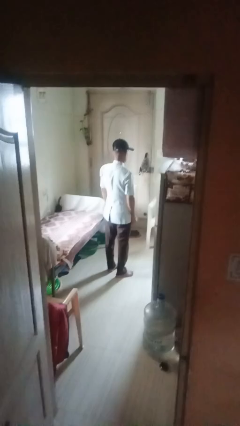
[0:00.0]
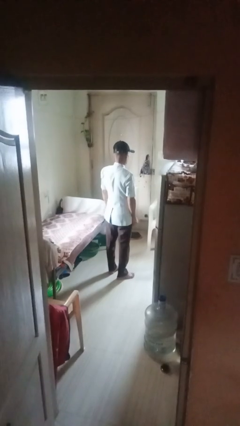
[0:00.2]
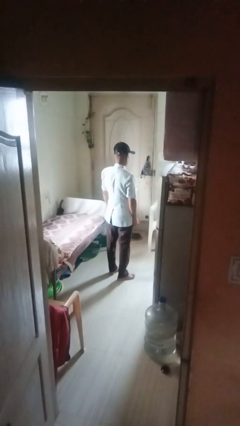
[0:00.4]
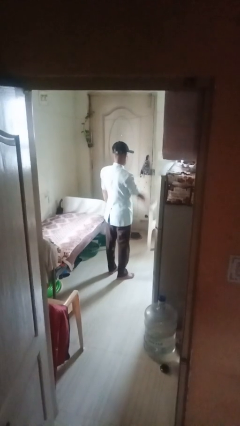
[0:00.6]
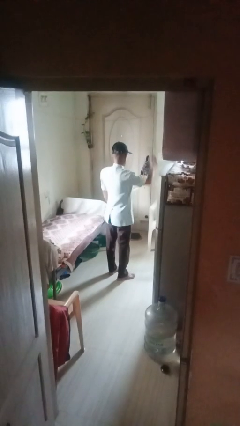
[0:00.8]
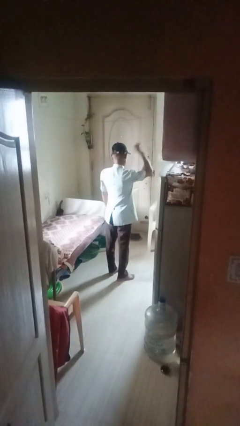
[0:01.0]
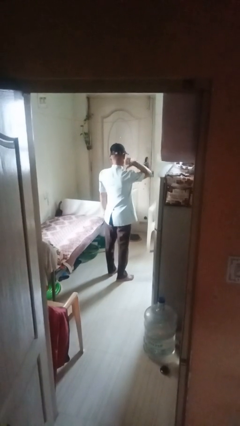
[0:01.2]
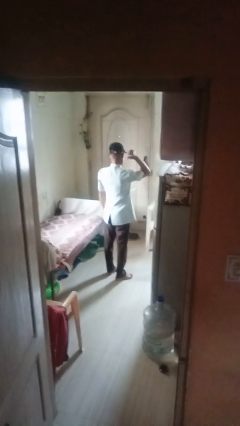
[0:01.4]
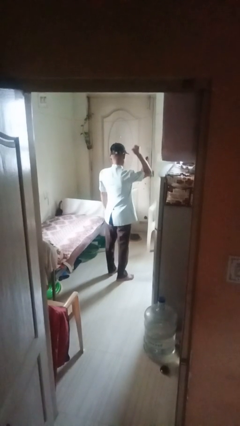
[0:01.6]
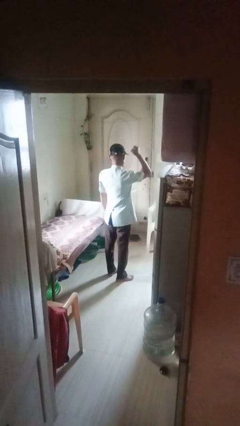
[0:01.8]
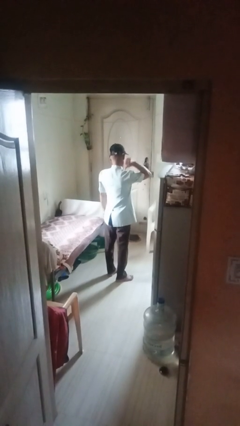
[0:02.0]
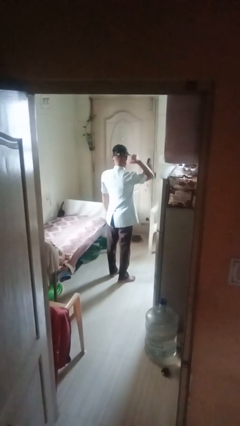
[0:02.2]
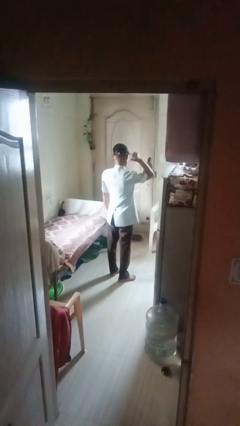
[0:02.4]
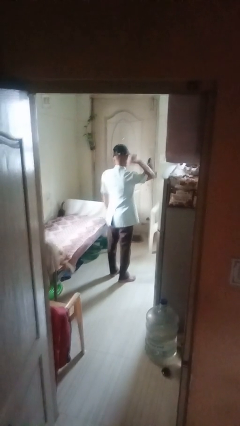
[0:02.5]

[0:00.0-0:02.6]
person gestures behind me

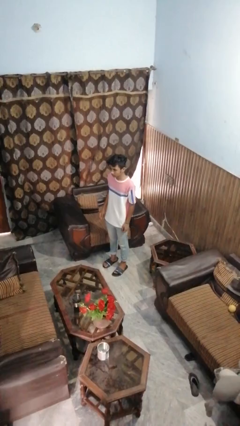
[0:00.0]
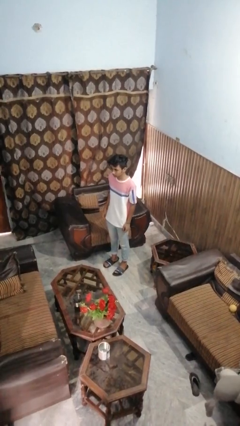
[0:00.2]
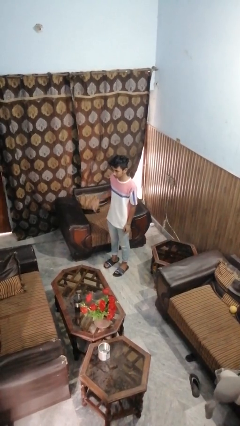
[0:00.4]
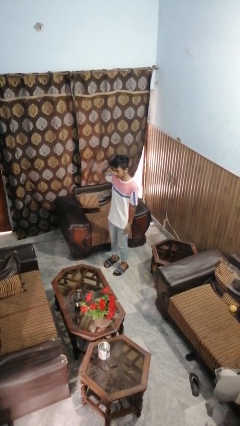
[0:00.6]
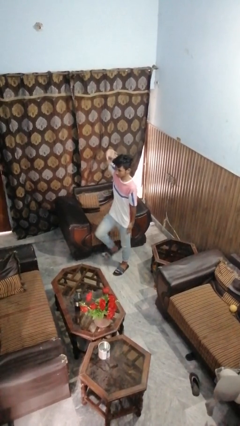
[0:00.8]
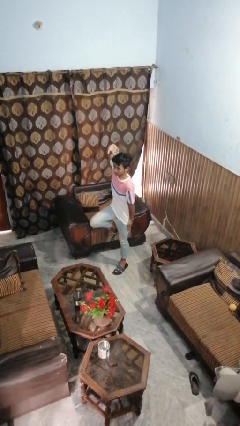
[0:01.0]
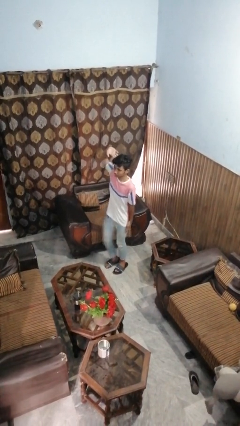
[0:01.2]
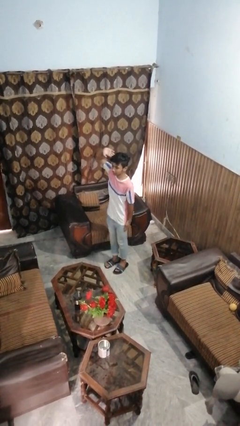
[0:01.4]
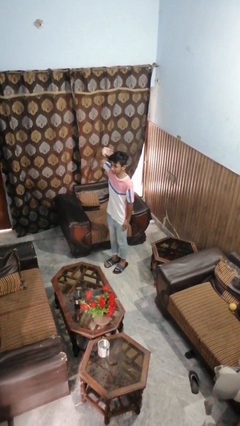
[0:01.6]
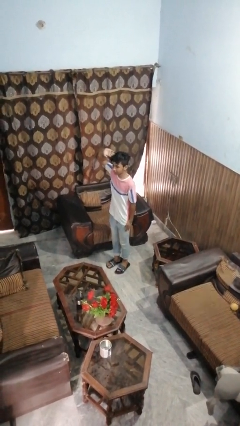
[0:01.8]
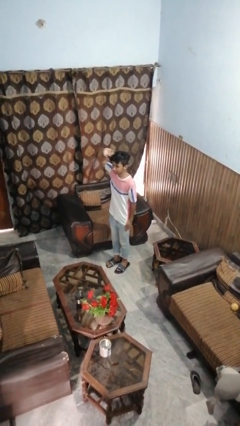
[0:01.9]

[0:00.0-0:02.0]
person salutes

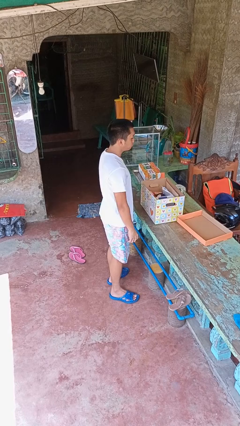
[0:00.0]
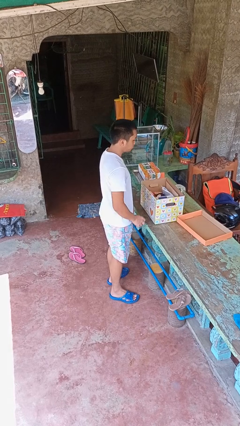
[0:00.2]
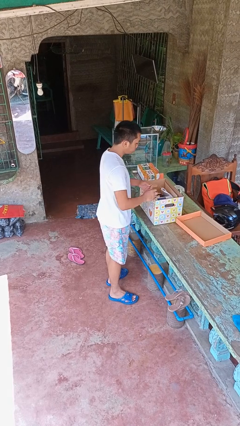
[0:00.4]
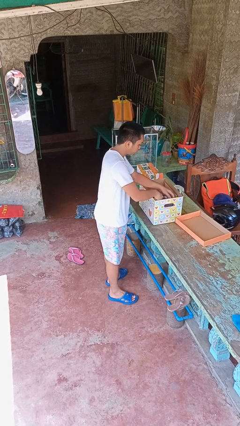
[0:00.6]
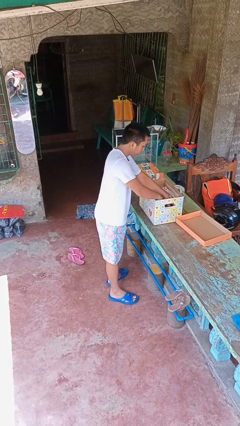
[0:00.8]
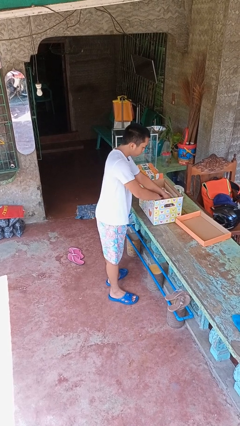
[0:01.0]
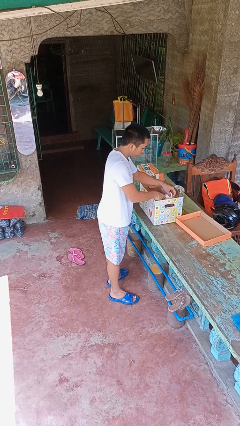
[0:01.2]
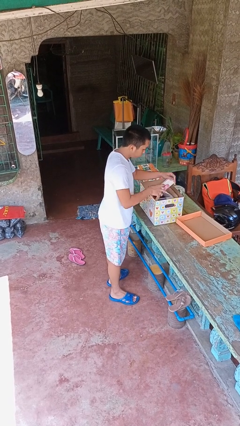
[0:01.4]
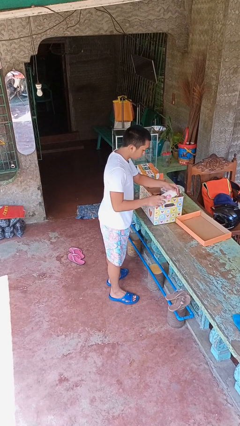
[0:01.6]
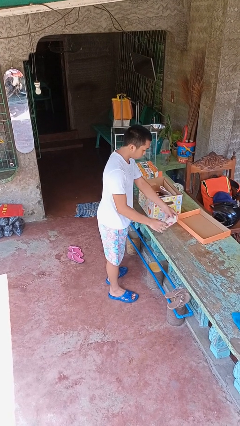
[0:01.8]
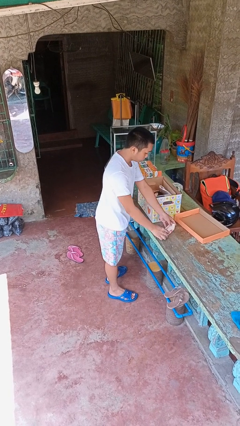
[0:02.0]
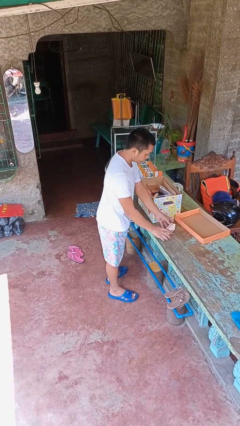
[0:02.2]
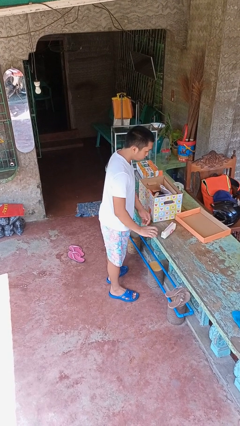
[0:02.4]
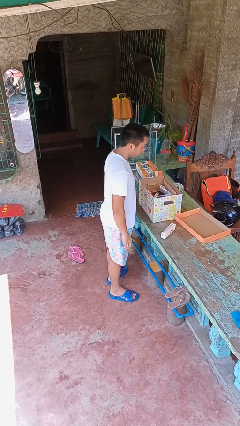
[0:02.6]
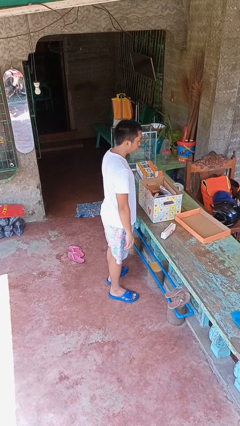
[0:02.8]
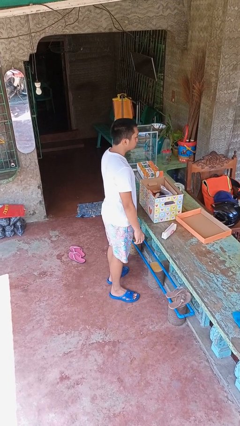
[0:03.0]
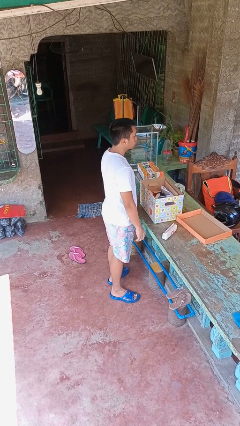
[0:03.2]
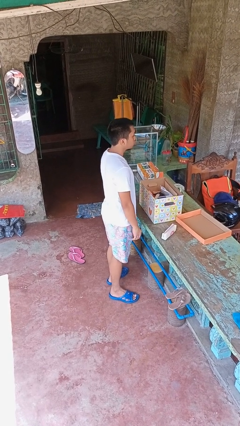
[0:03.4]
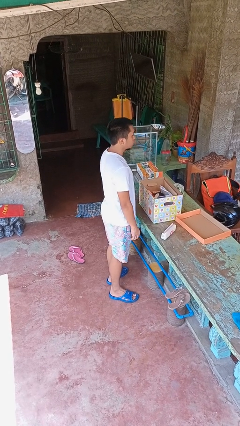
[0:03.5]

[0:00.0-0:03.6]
person takes object from box

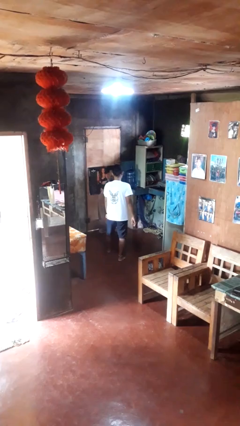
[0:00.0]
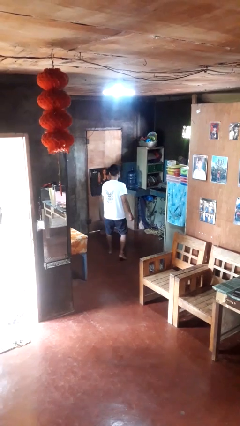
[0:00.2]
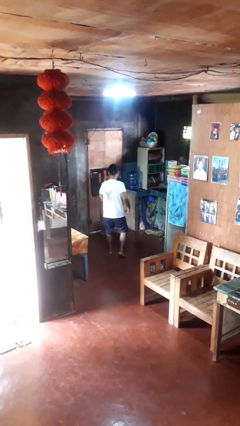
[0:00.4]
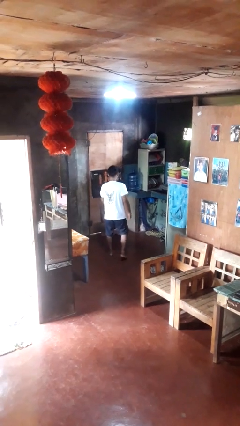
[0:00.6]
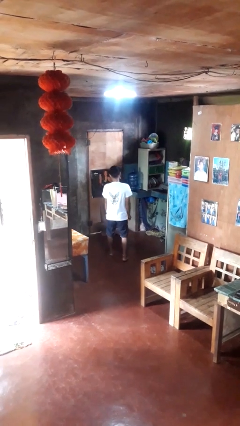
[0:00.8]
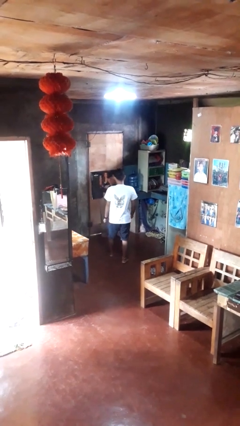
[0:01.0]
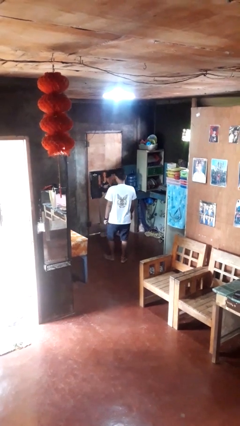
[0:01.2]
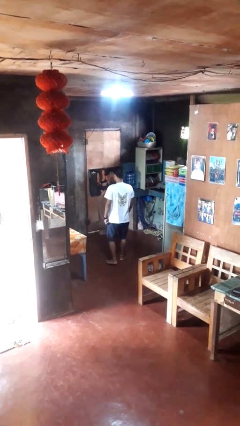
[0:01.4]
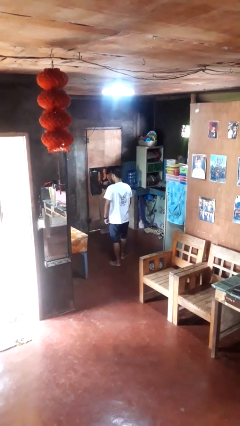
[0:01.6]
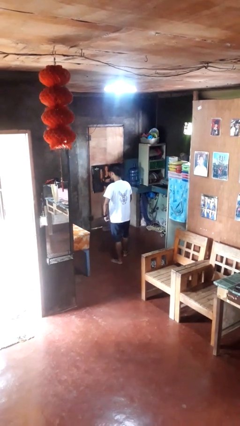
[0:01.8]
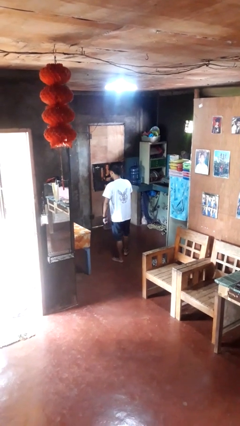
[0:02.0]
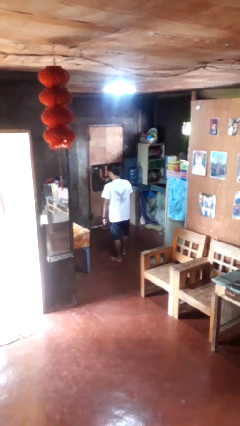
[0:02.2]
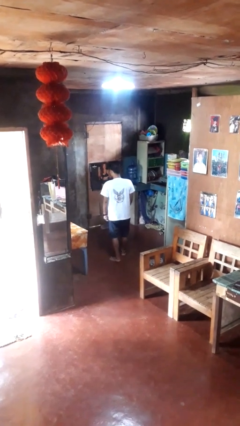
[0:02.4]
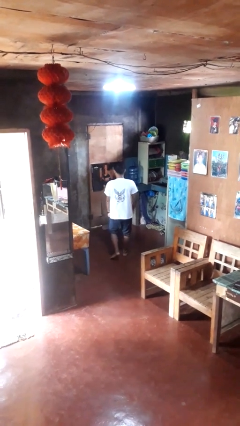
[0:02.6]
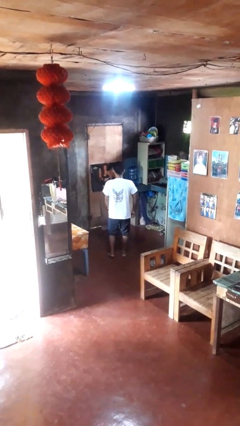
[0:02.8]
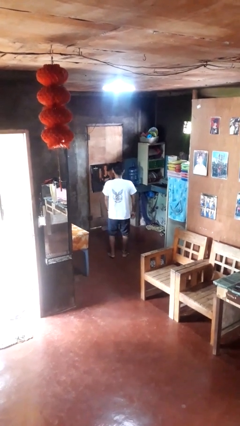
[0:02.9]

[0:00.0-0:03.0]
person dances in place

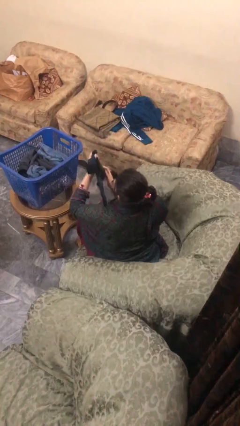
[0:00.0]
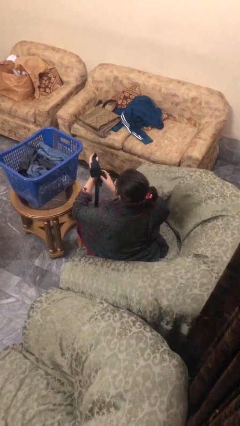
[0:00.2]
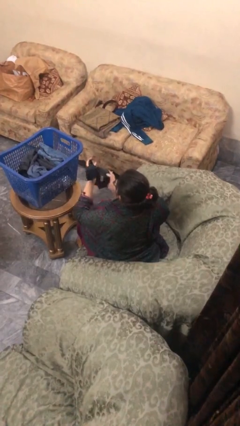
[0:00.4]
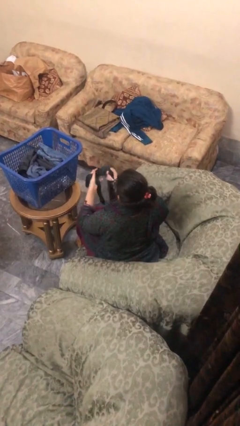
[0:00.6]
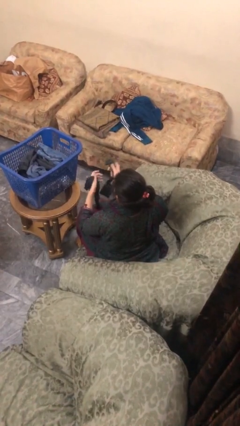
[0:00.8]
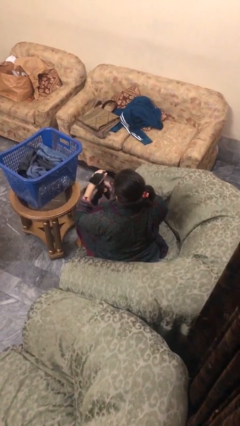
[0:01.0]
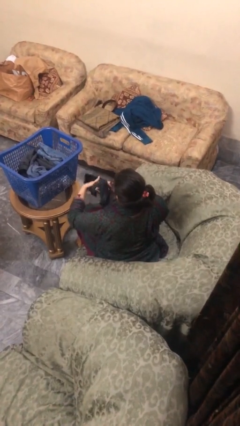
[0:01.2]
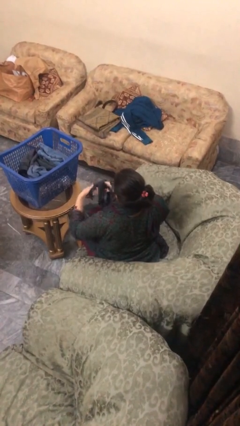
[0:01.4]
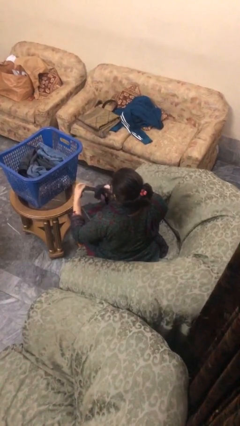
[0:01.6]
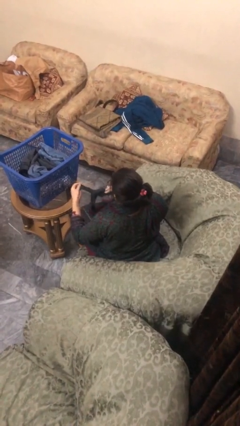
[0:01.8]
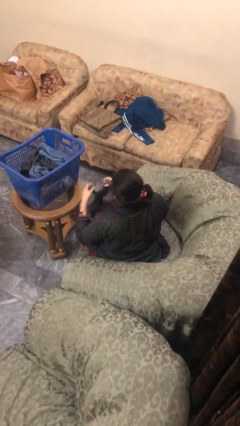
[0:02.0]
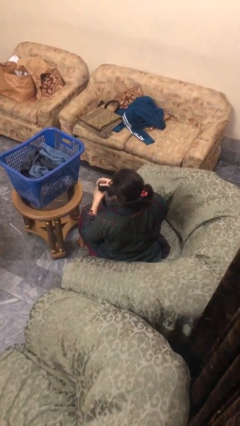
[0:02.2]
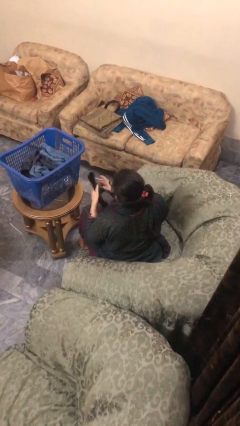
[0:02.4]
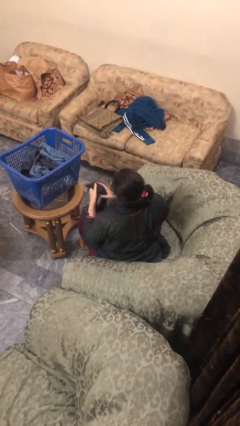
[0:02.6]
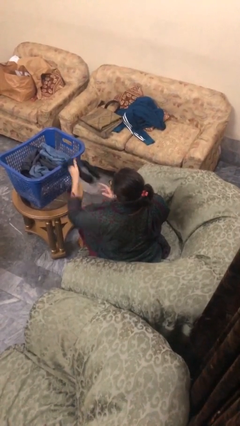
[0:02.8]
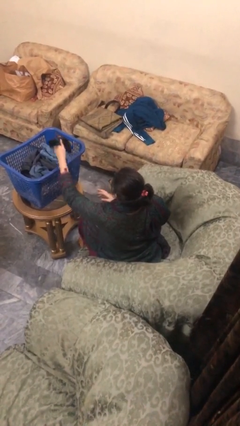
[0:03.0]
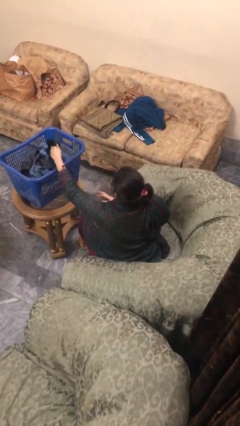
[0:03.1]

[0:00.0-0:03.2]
person folds socks

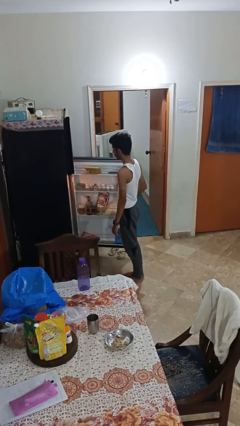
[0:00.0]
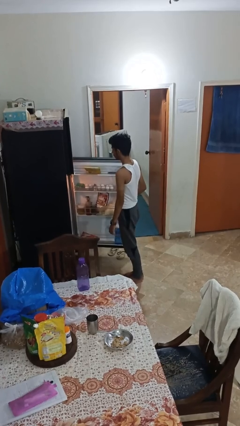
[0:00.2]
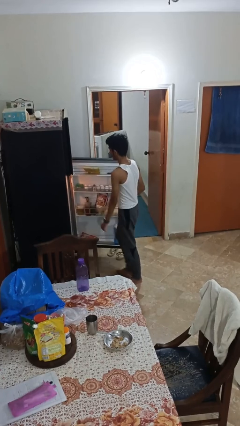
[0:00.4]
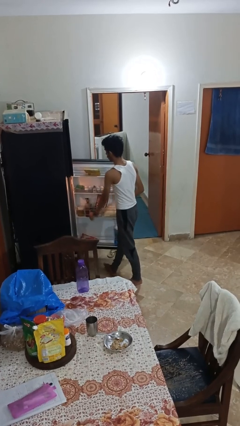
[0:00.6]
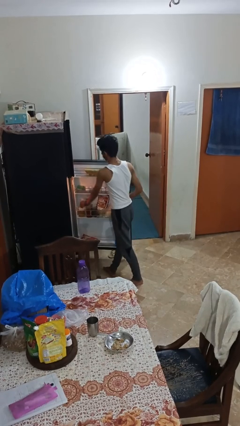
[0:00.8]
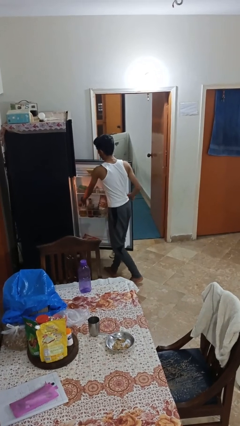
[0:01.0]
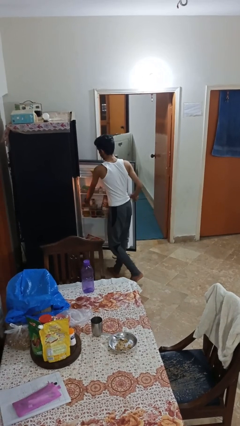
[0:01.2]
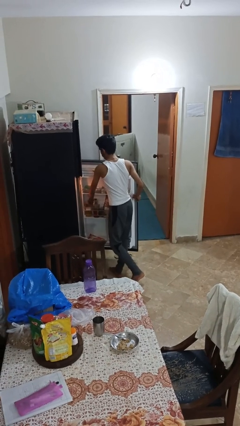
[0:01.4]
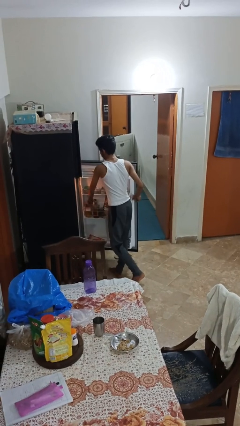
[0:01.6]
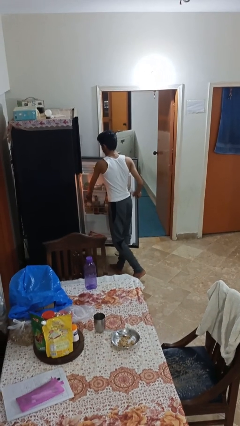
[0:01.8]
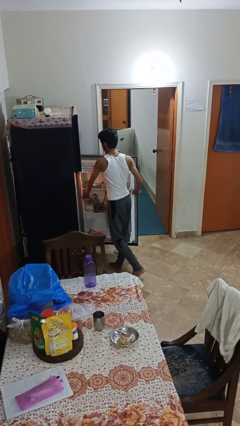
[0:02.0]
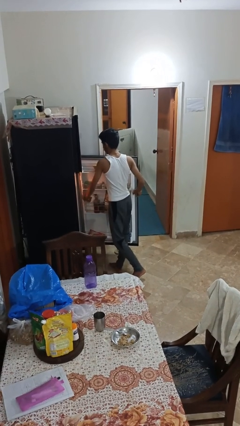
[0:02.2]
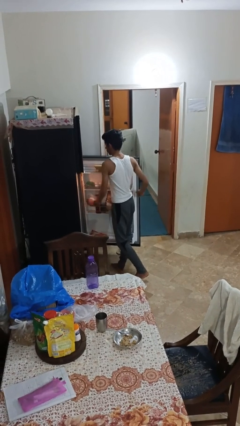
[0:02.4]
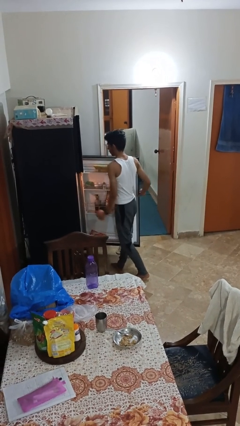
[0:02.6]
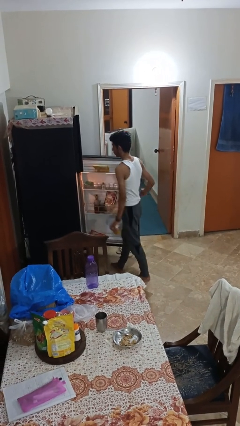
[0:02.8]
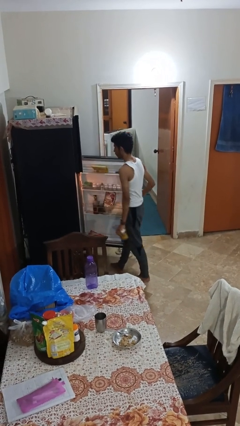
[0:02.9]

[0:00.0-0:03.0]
person takes object from refrigerator

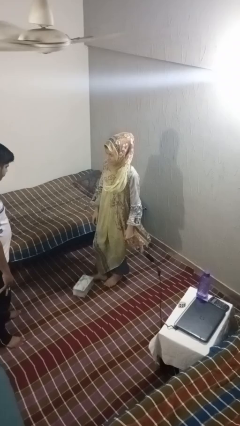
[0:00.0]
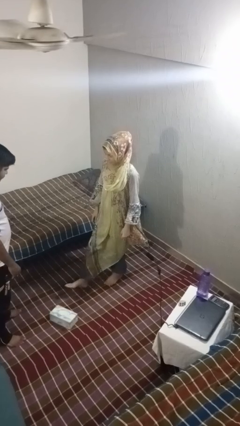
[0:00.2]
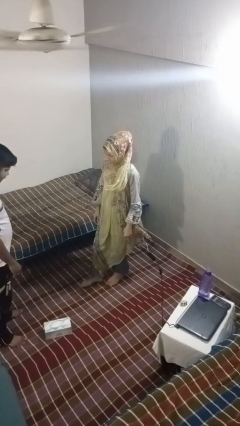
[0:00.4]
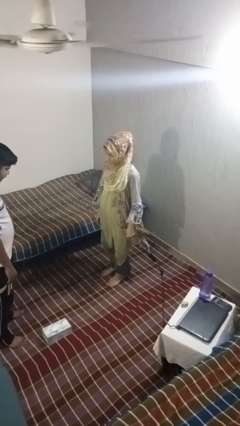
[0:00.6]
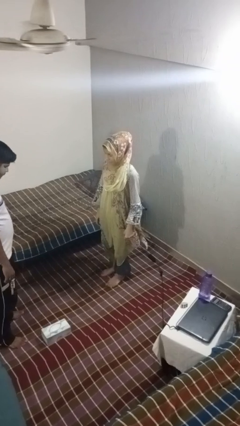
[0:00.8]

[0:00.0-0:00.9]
person kicks object to person
